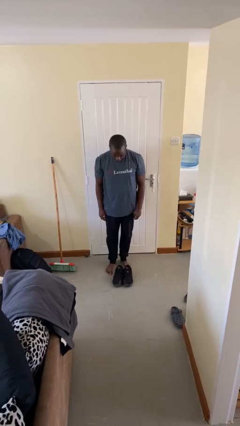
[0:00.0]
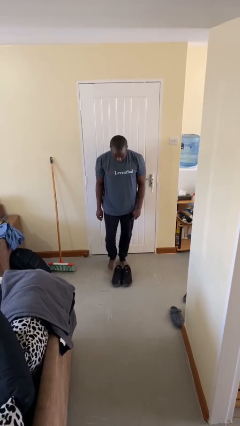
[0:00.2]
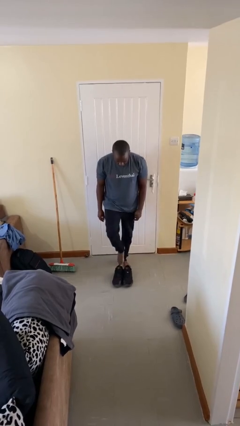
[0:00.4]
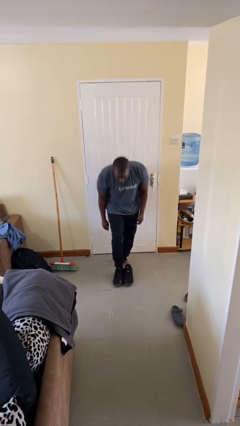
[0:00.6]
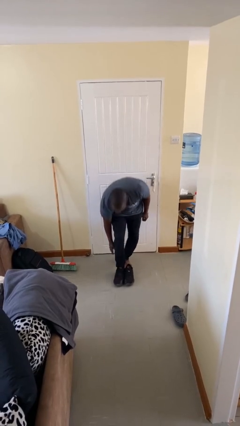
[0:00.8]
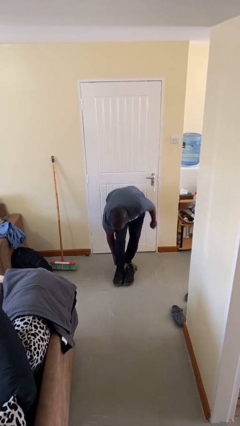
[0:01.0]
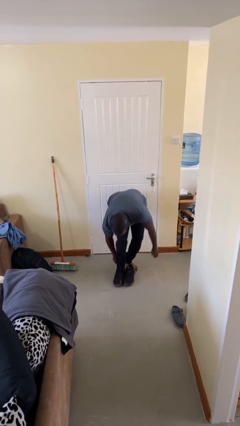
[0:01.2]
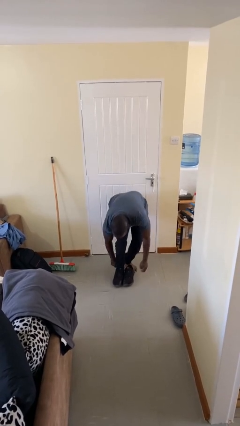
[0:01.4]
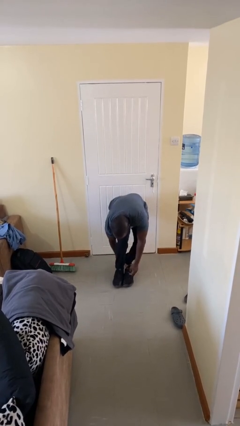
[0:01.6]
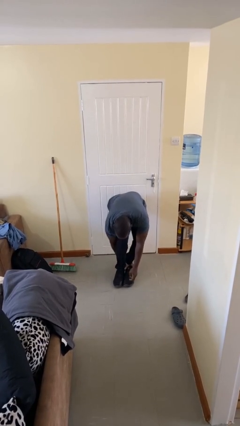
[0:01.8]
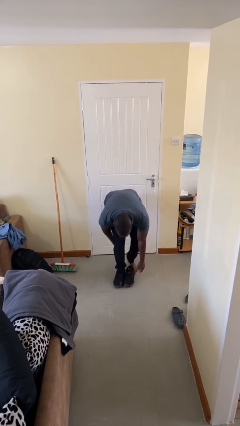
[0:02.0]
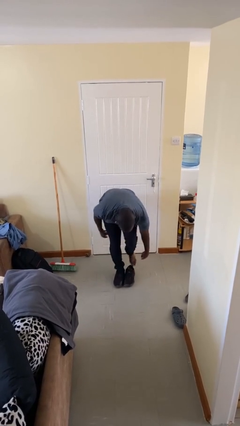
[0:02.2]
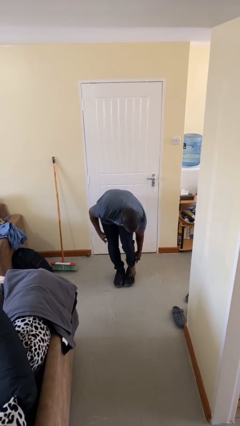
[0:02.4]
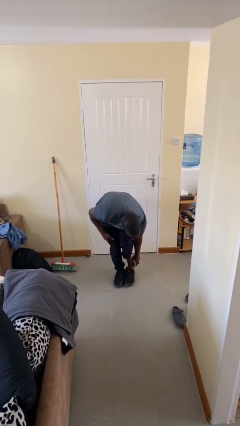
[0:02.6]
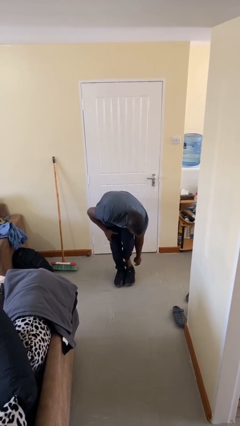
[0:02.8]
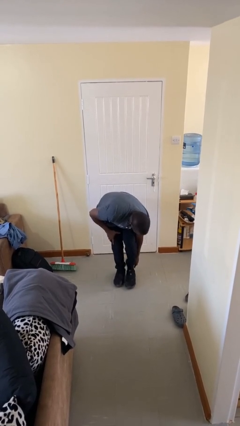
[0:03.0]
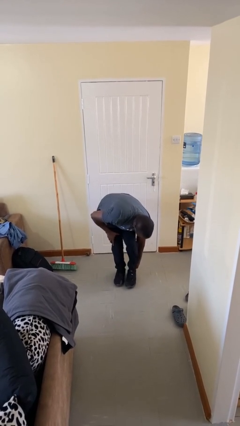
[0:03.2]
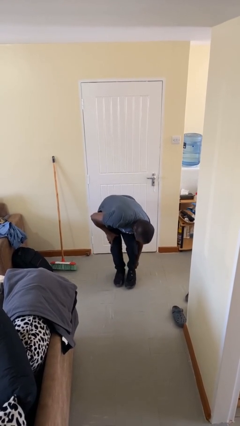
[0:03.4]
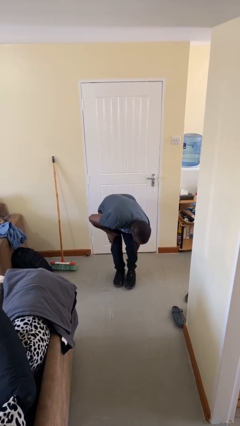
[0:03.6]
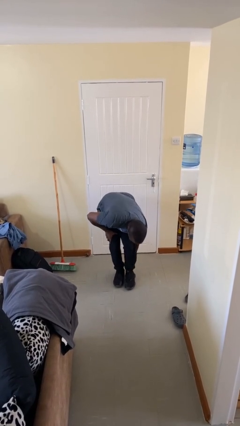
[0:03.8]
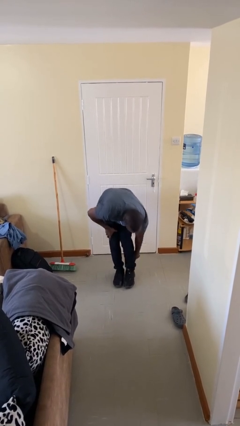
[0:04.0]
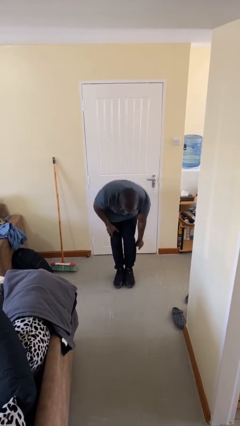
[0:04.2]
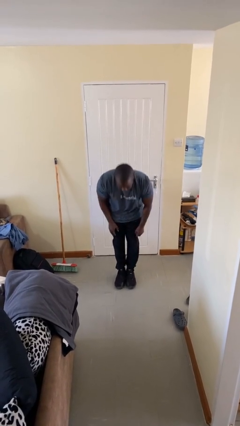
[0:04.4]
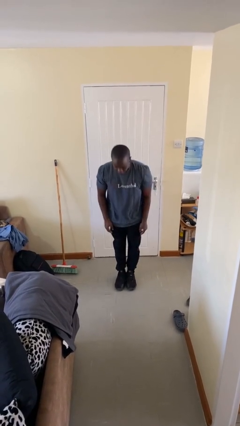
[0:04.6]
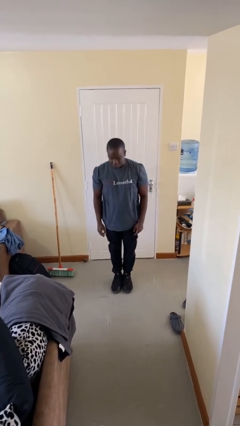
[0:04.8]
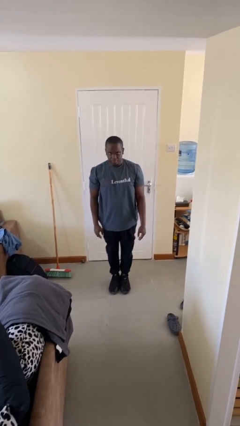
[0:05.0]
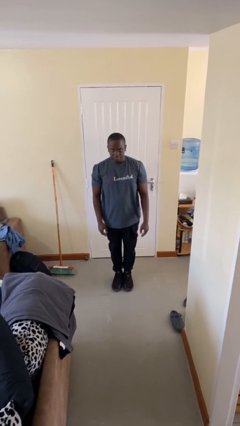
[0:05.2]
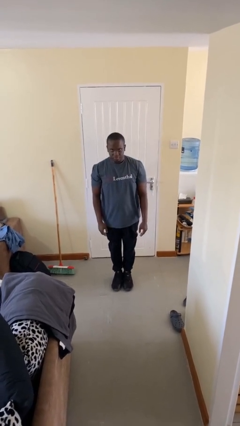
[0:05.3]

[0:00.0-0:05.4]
person puts on shoes

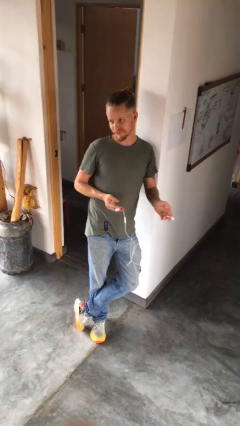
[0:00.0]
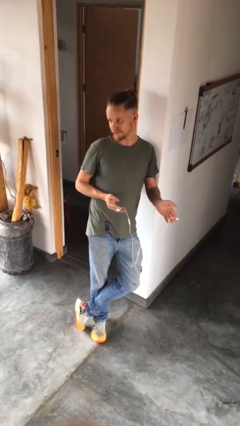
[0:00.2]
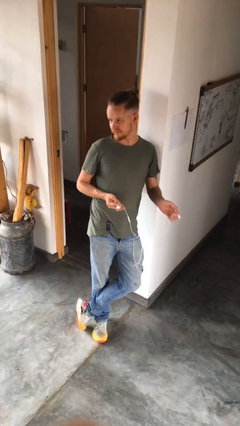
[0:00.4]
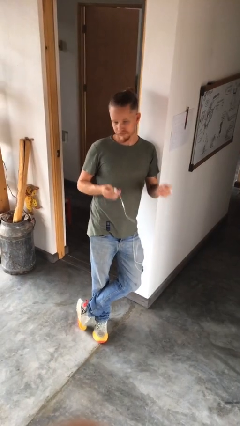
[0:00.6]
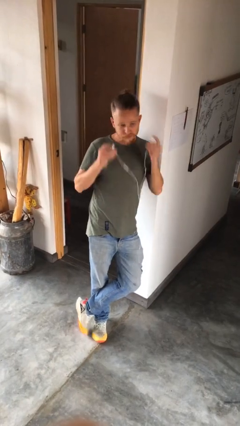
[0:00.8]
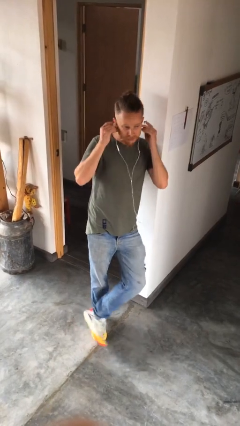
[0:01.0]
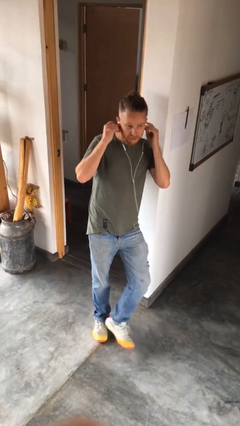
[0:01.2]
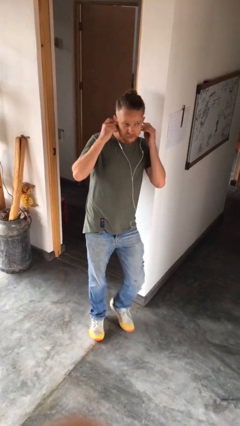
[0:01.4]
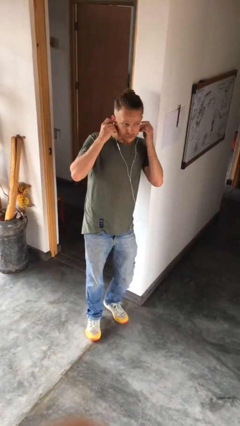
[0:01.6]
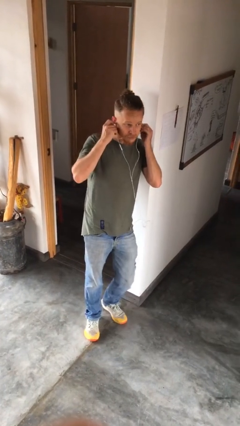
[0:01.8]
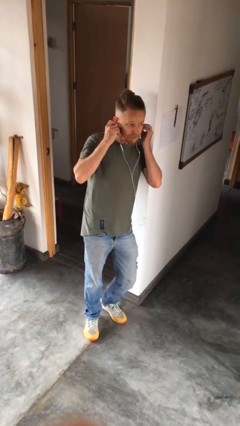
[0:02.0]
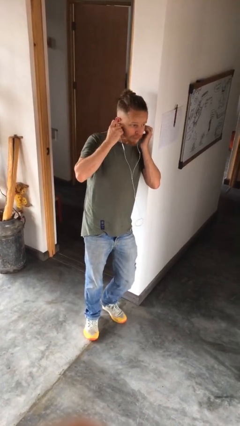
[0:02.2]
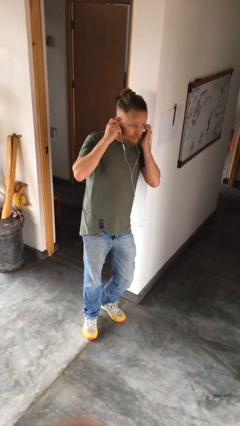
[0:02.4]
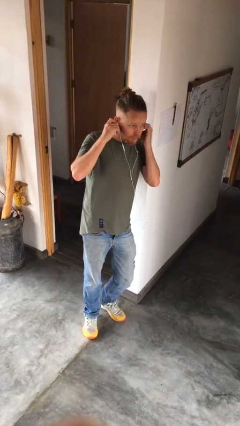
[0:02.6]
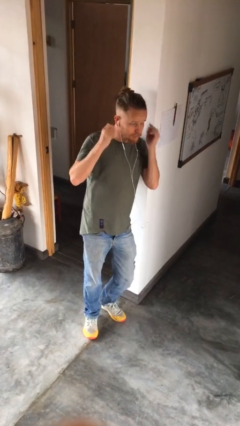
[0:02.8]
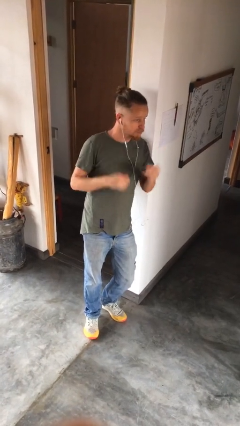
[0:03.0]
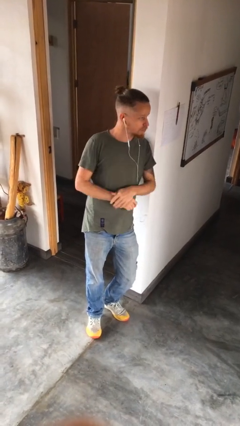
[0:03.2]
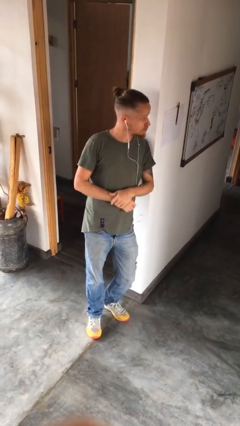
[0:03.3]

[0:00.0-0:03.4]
person puts on headphones

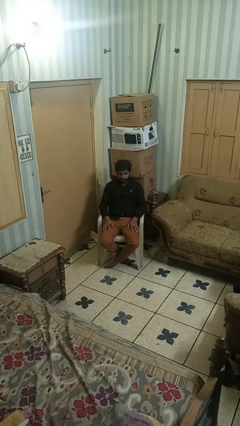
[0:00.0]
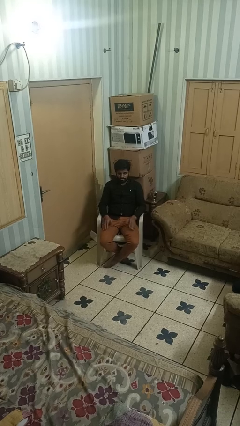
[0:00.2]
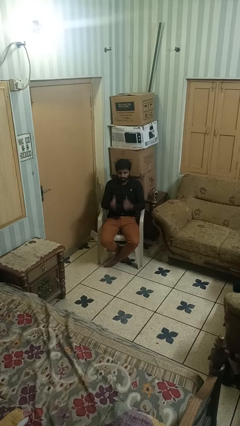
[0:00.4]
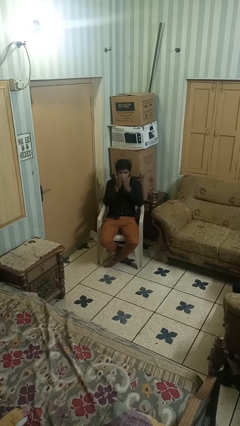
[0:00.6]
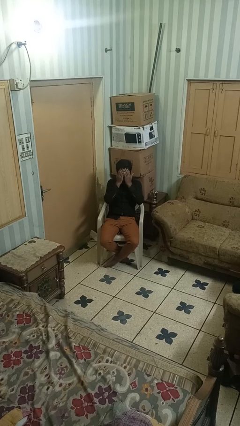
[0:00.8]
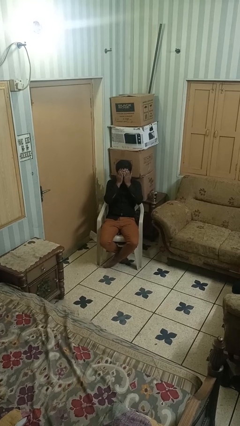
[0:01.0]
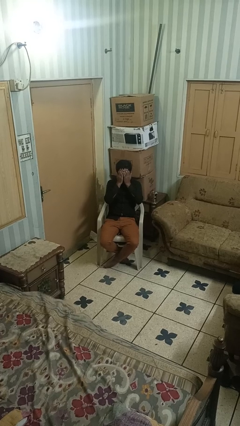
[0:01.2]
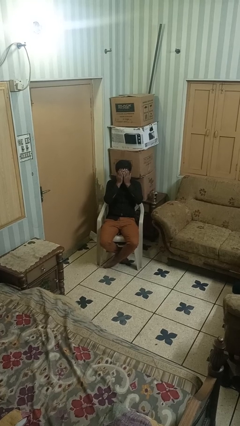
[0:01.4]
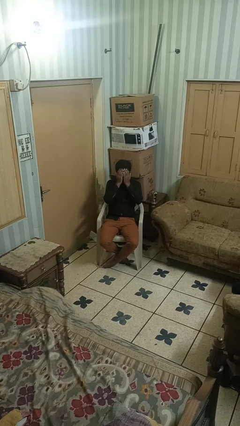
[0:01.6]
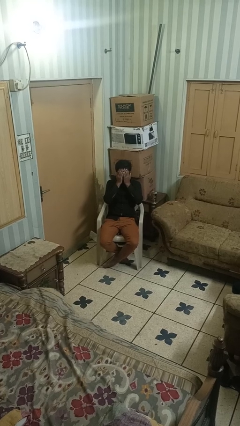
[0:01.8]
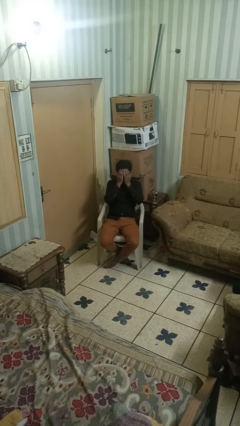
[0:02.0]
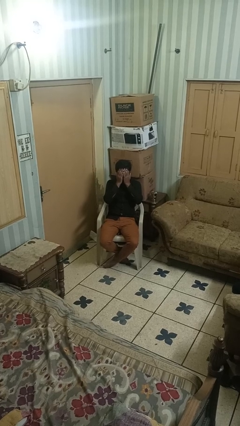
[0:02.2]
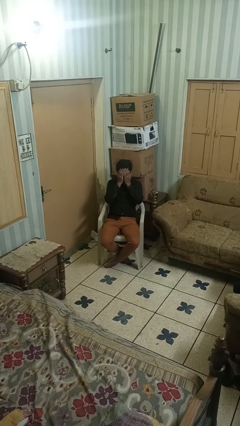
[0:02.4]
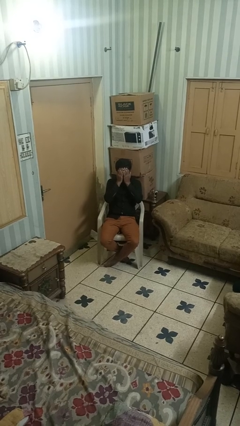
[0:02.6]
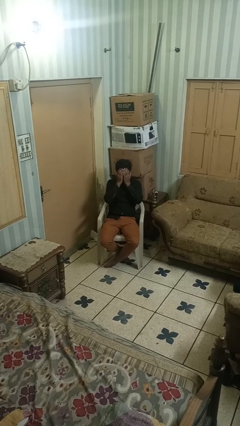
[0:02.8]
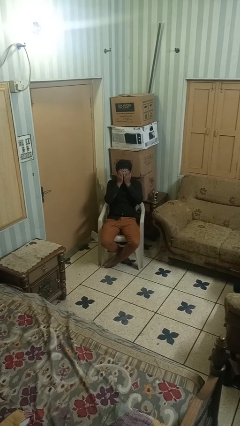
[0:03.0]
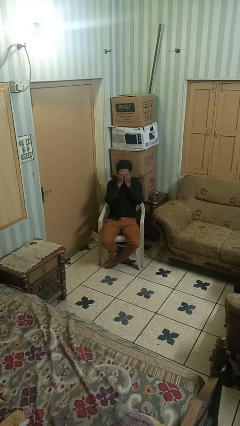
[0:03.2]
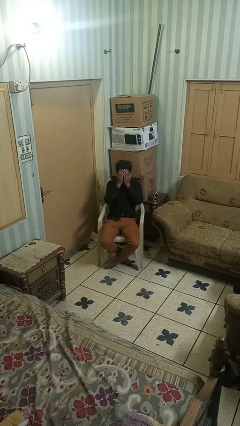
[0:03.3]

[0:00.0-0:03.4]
person covers face with hands

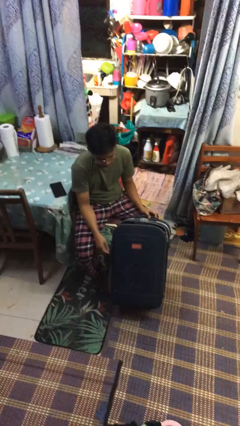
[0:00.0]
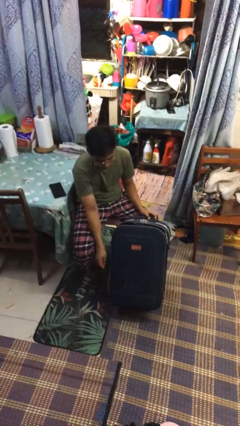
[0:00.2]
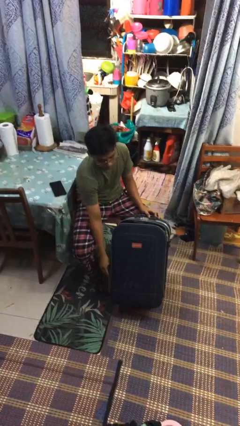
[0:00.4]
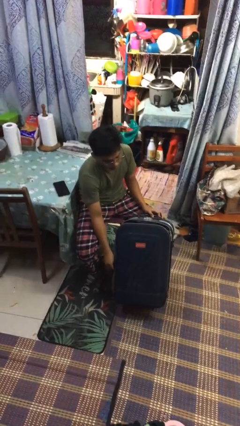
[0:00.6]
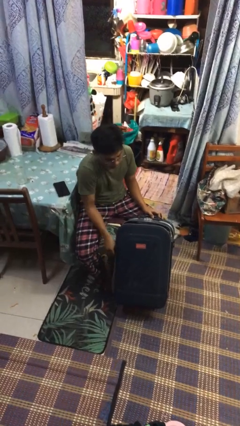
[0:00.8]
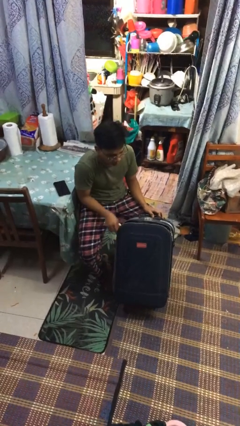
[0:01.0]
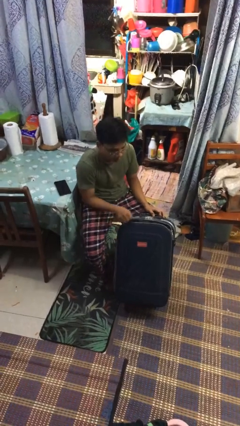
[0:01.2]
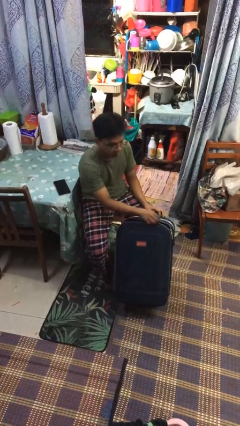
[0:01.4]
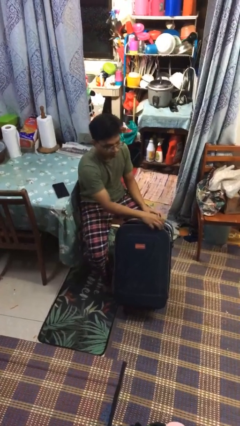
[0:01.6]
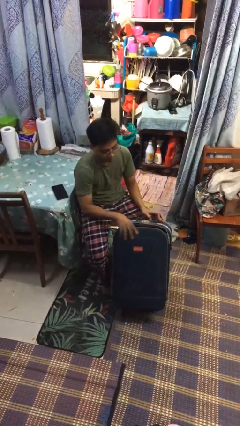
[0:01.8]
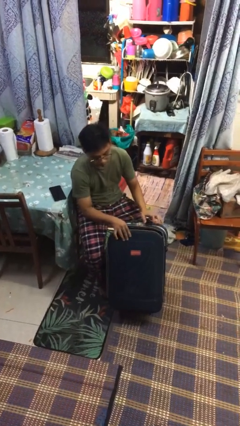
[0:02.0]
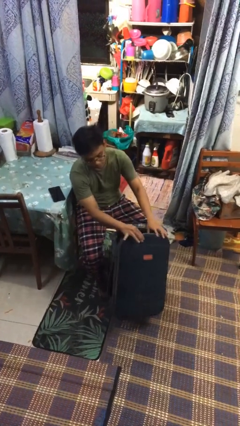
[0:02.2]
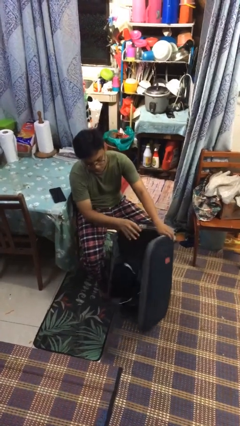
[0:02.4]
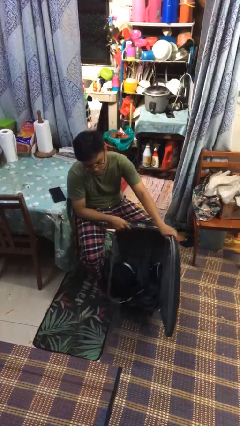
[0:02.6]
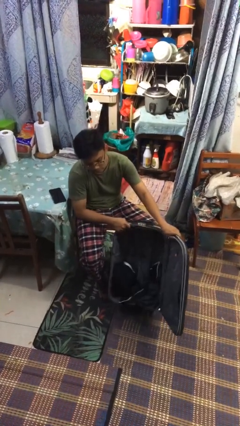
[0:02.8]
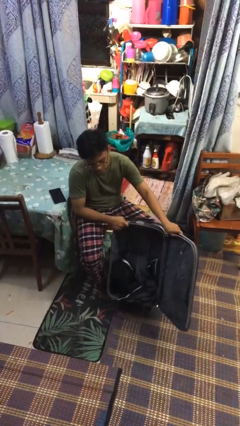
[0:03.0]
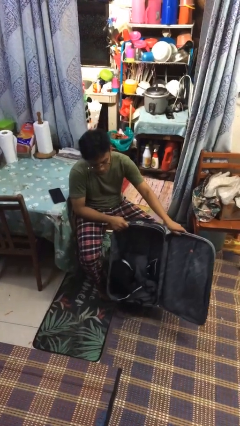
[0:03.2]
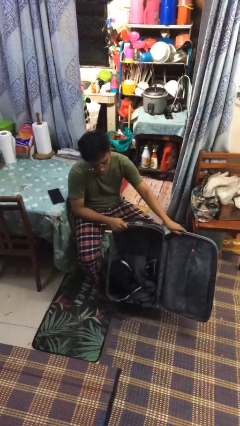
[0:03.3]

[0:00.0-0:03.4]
person opens suitcase

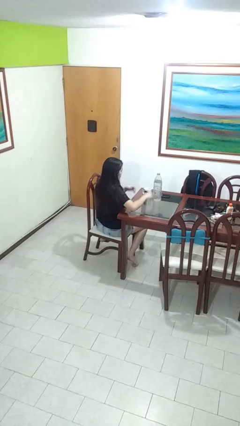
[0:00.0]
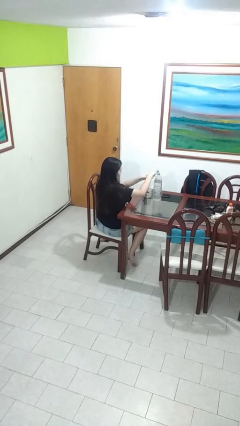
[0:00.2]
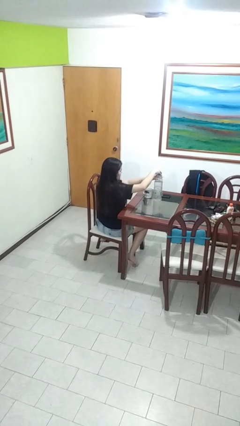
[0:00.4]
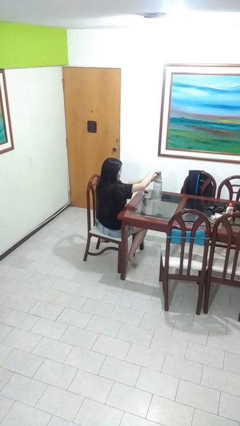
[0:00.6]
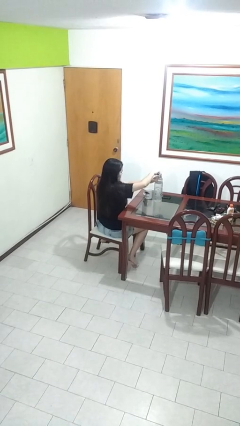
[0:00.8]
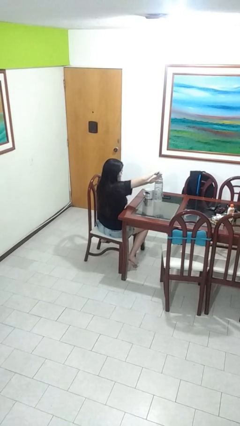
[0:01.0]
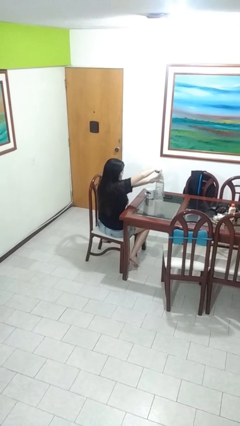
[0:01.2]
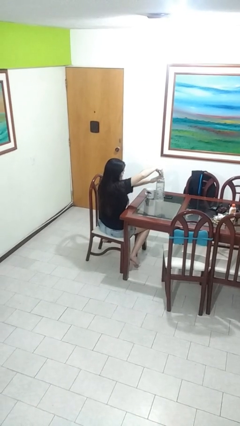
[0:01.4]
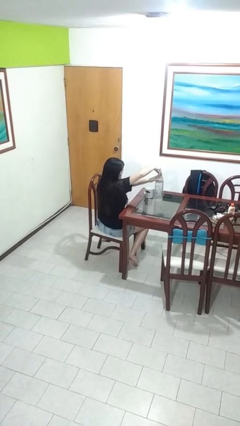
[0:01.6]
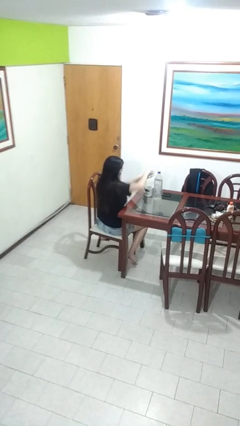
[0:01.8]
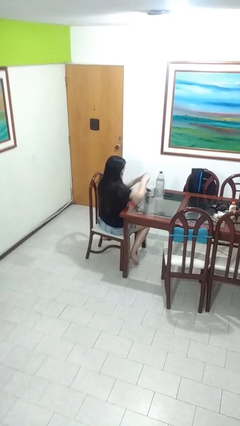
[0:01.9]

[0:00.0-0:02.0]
person screws lid to bottle
